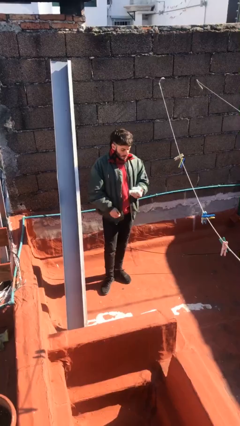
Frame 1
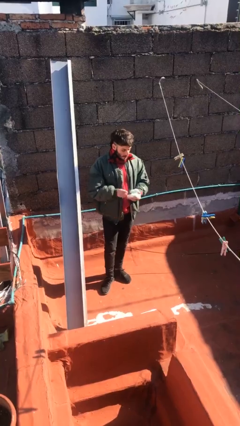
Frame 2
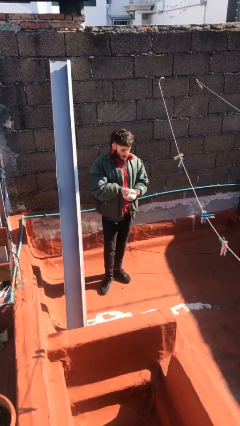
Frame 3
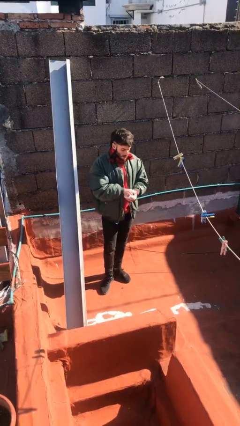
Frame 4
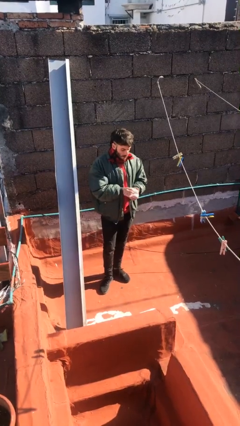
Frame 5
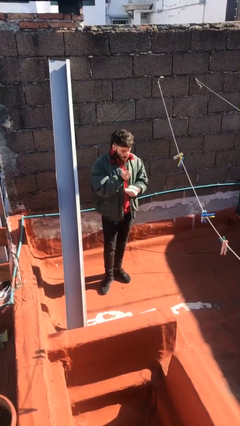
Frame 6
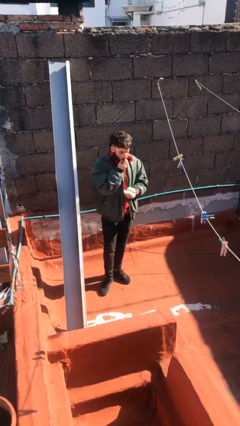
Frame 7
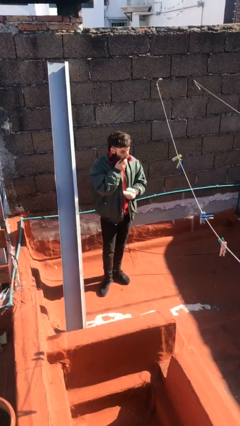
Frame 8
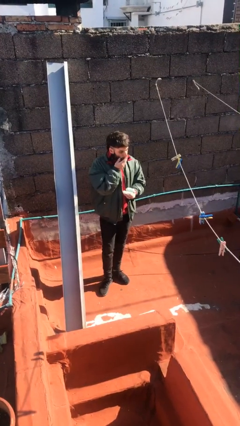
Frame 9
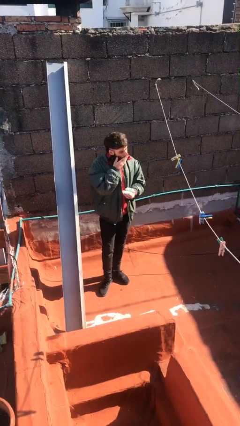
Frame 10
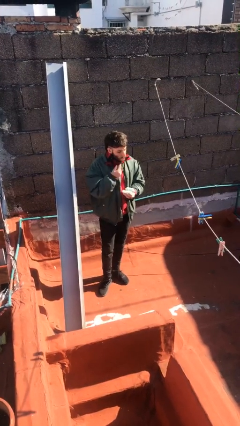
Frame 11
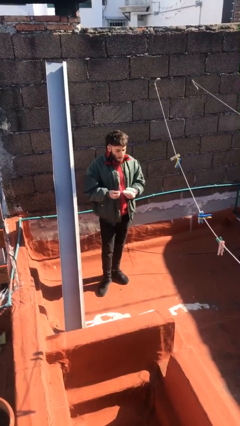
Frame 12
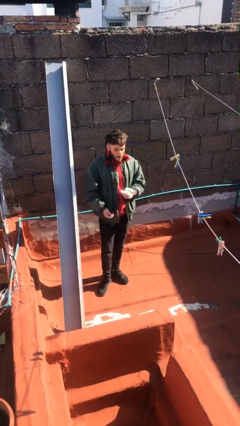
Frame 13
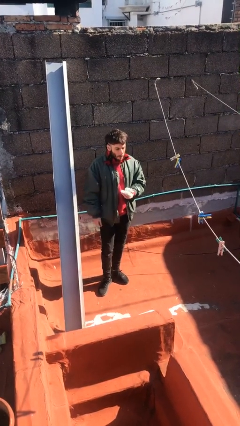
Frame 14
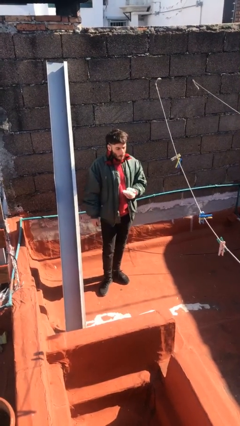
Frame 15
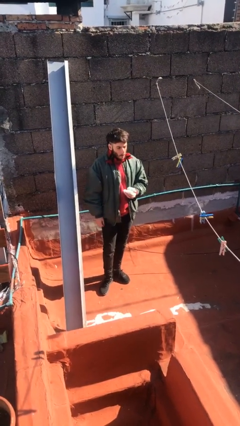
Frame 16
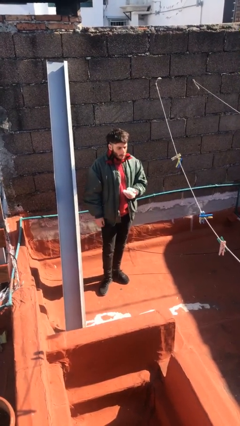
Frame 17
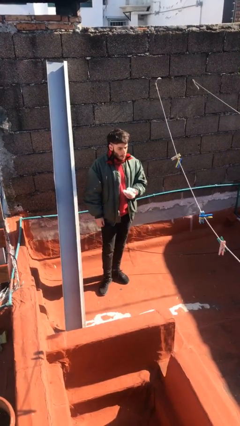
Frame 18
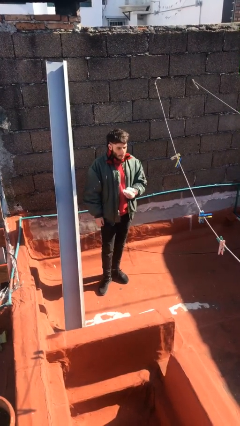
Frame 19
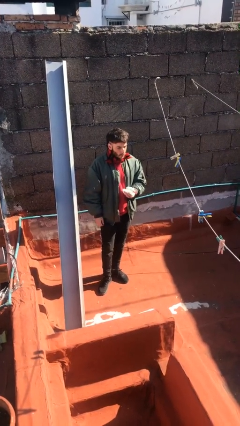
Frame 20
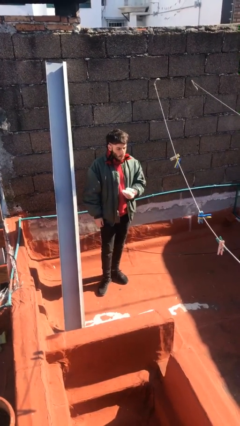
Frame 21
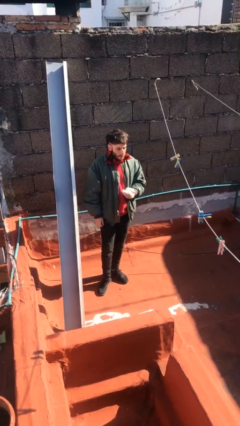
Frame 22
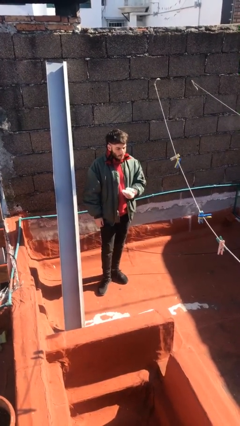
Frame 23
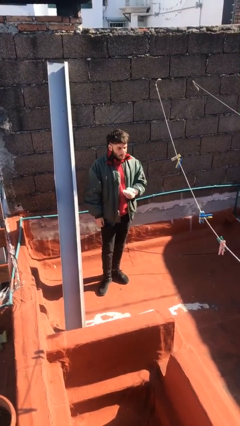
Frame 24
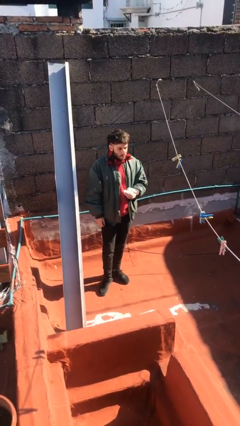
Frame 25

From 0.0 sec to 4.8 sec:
person eats snack from bag

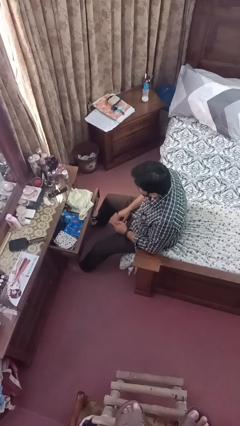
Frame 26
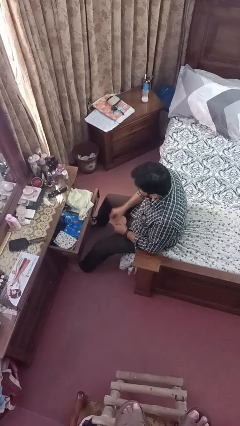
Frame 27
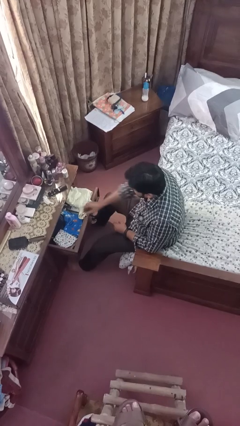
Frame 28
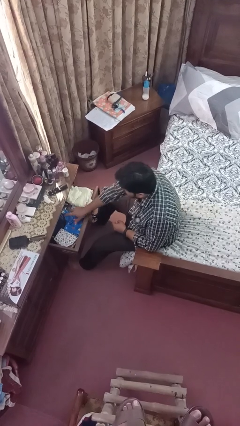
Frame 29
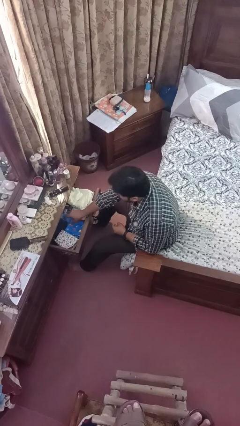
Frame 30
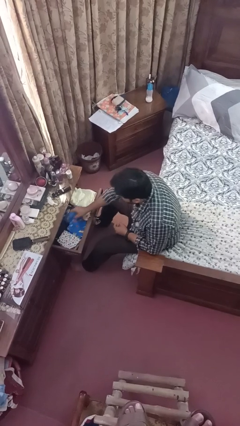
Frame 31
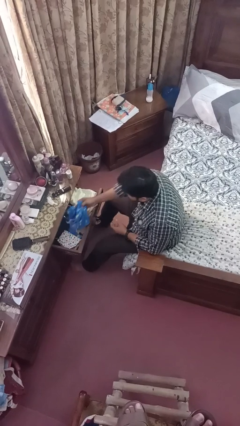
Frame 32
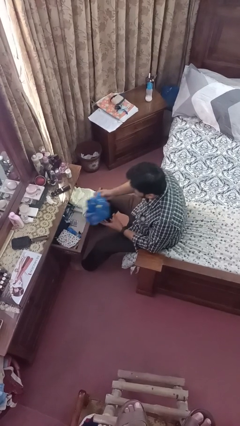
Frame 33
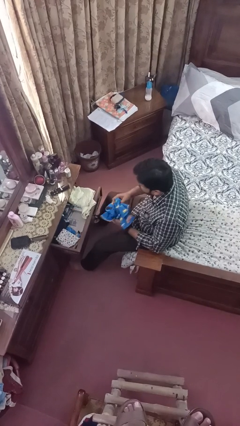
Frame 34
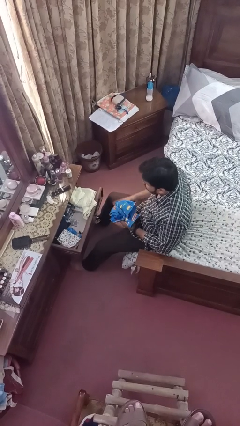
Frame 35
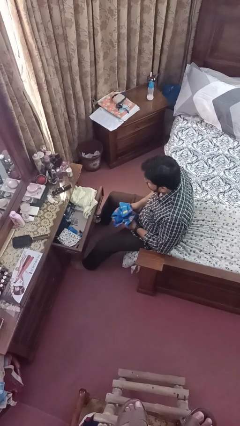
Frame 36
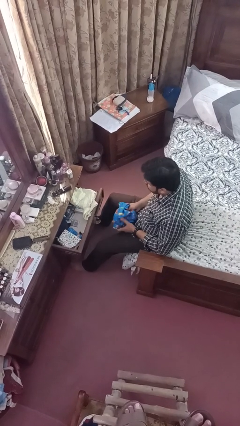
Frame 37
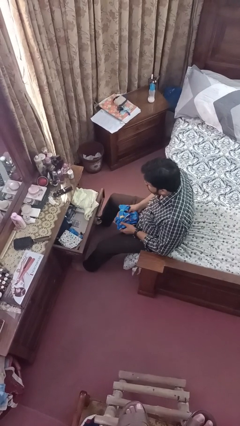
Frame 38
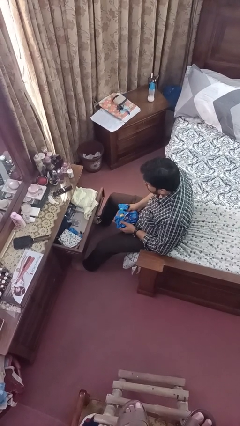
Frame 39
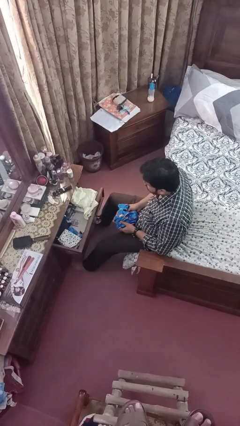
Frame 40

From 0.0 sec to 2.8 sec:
person takes clothes from dresser

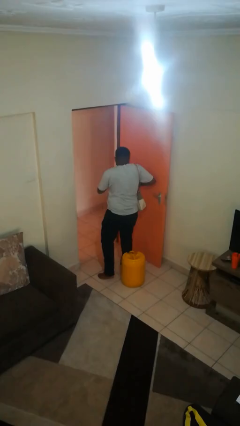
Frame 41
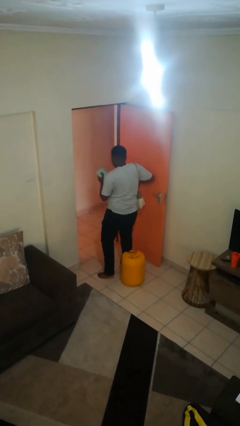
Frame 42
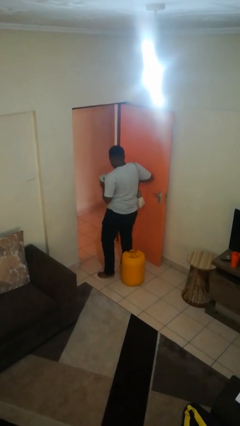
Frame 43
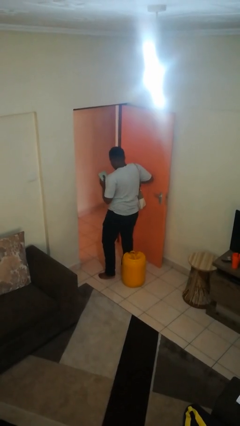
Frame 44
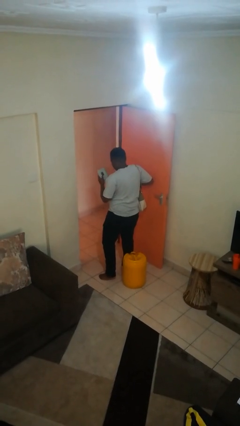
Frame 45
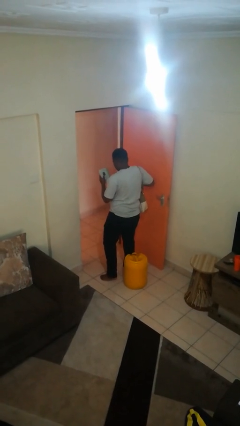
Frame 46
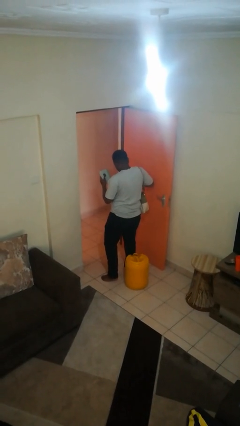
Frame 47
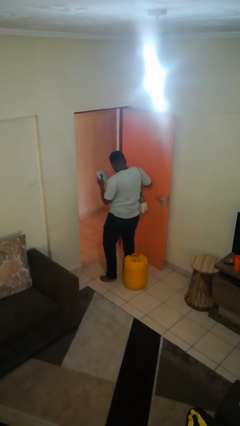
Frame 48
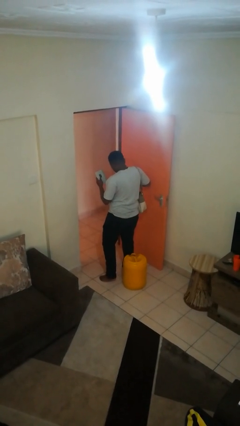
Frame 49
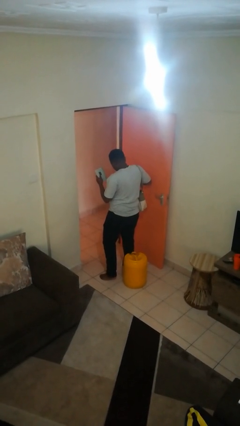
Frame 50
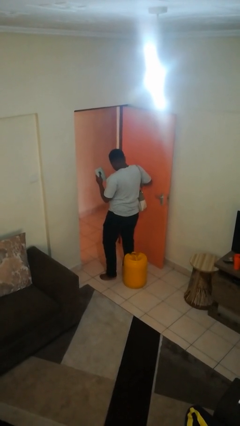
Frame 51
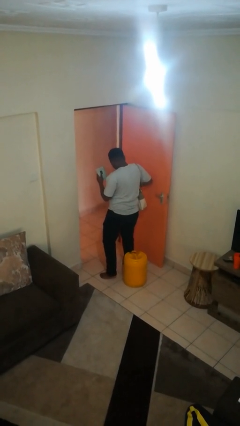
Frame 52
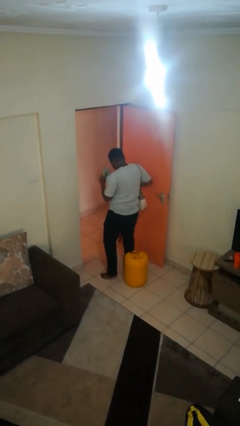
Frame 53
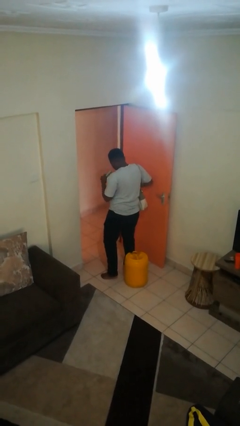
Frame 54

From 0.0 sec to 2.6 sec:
person takes object from purse

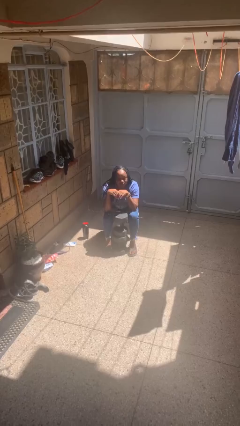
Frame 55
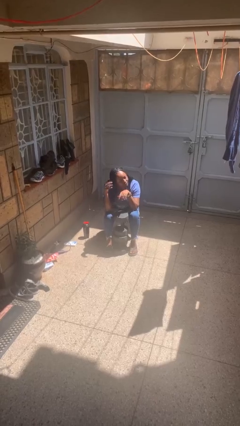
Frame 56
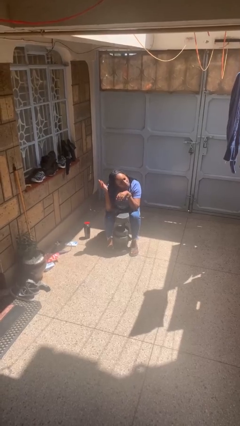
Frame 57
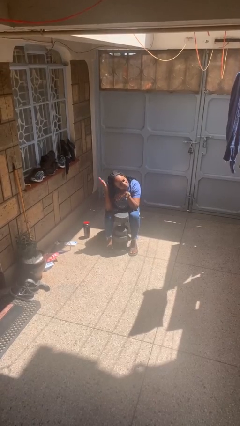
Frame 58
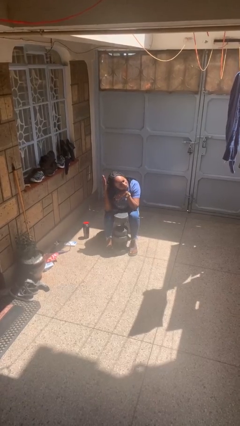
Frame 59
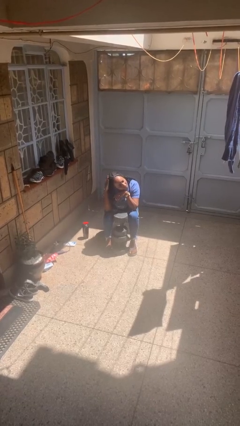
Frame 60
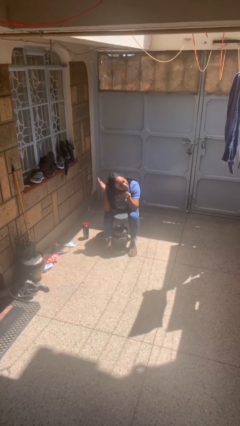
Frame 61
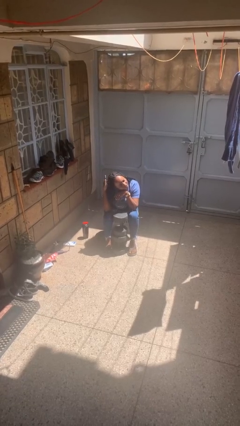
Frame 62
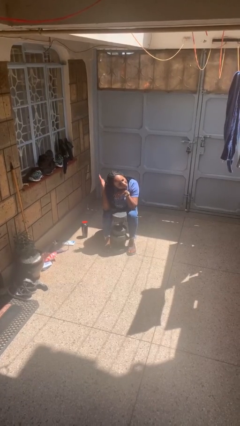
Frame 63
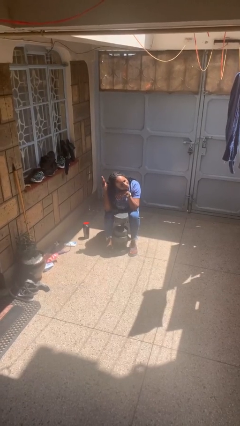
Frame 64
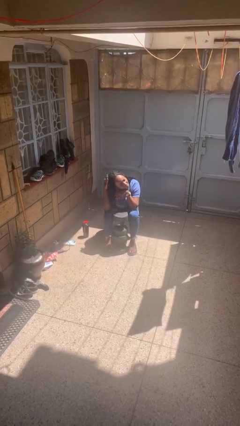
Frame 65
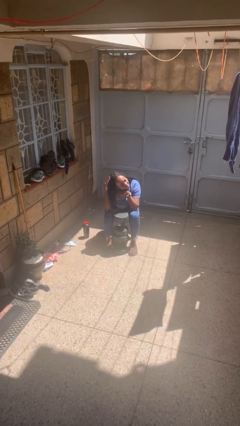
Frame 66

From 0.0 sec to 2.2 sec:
person pats head

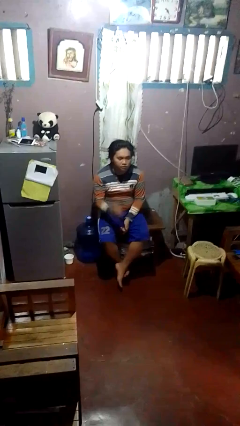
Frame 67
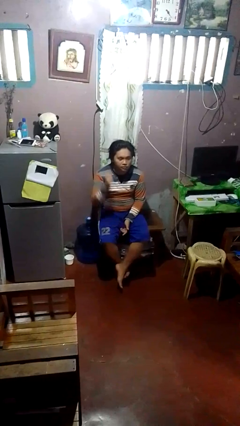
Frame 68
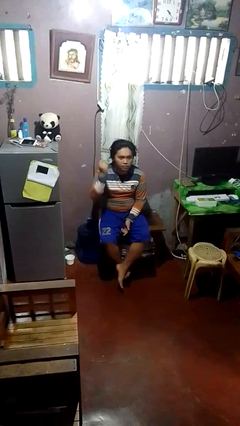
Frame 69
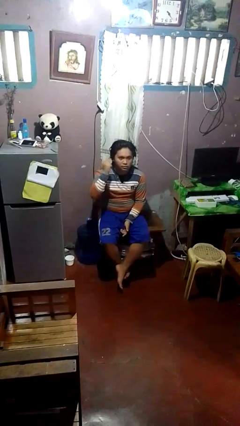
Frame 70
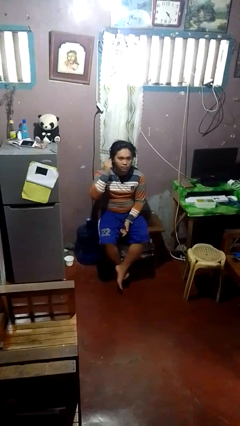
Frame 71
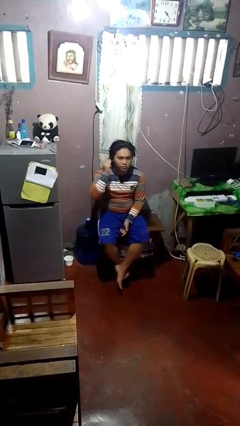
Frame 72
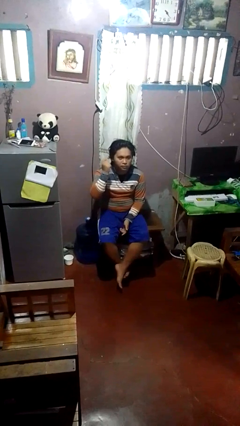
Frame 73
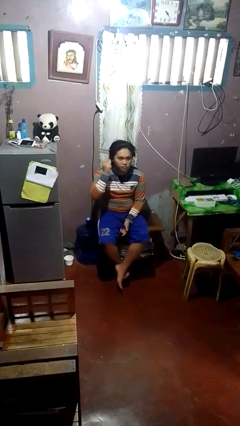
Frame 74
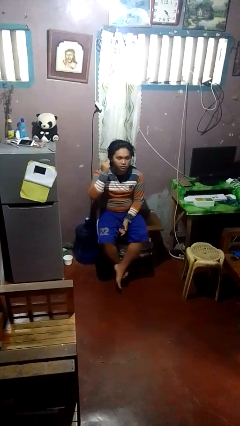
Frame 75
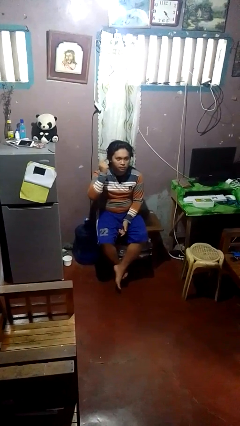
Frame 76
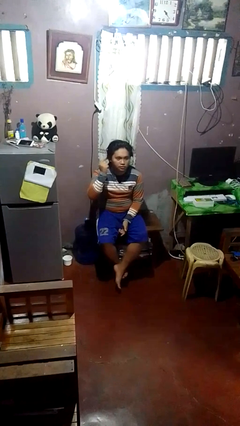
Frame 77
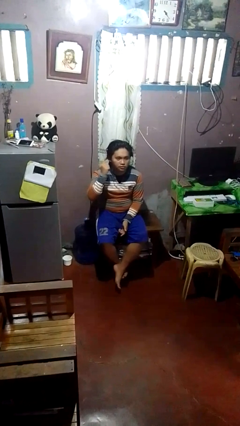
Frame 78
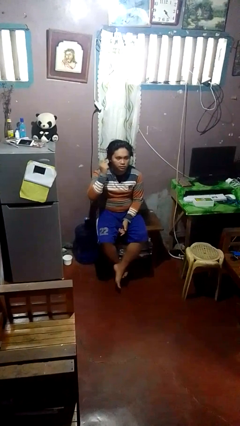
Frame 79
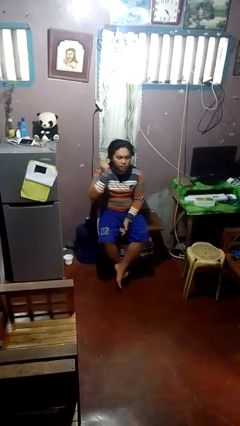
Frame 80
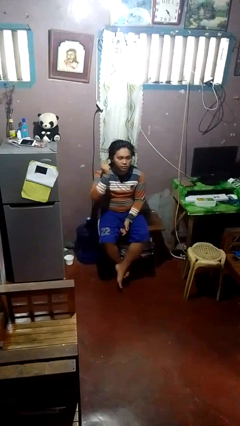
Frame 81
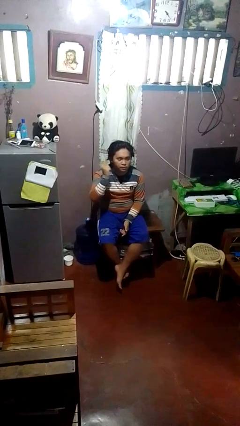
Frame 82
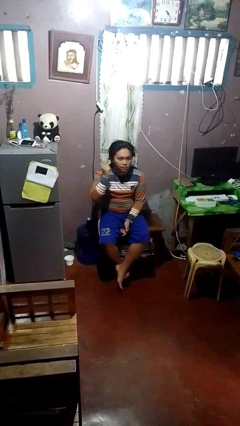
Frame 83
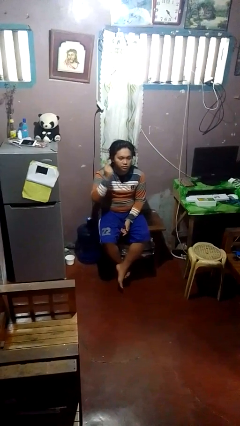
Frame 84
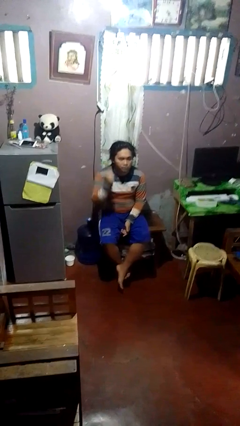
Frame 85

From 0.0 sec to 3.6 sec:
person gestures listen closely

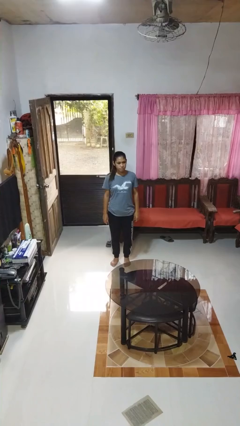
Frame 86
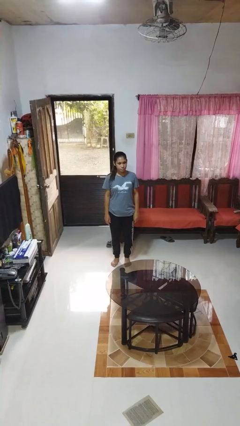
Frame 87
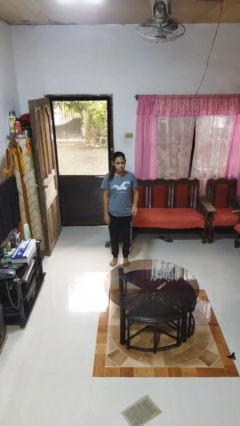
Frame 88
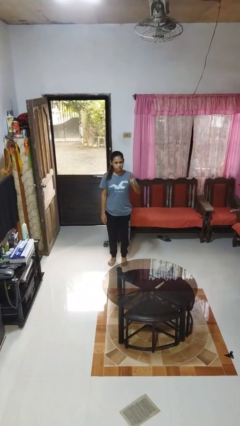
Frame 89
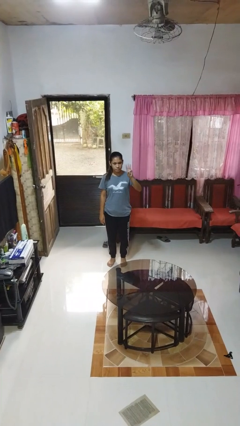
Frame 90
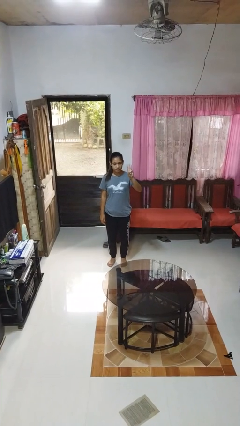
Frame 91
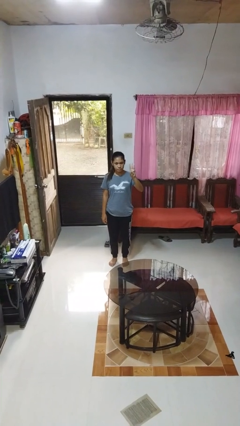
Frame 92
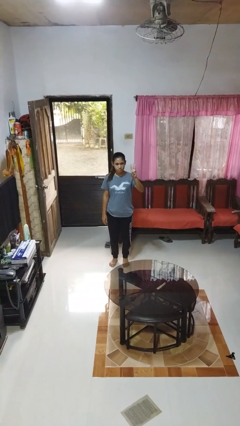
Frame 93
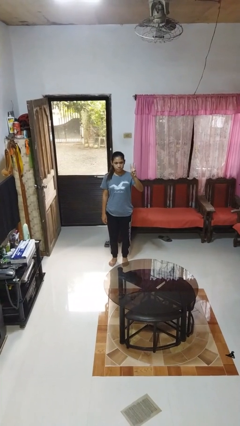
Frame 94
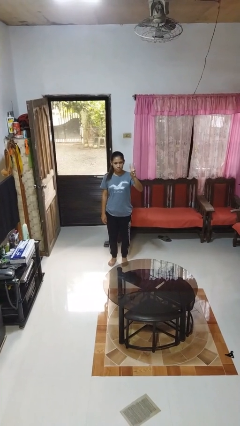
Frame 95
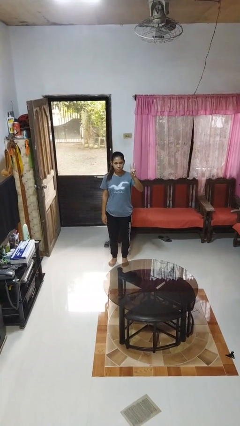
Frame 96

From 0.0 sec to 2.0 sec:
person gestures number three
